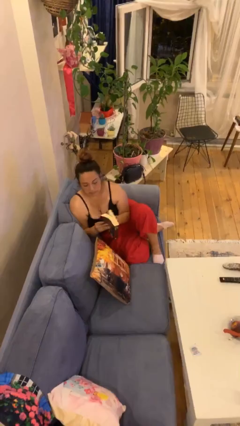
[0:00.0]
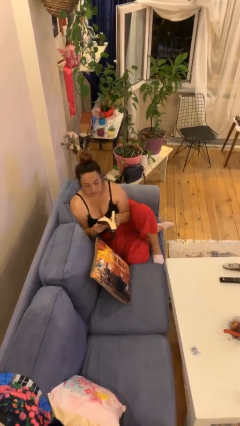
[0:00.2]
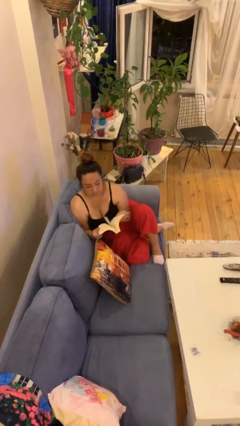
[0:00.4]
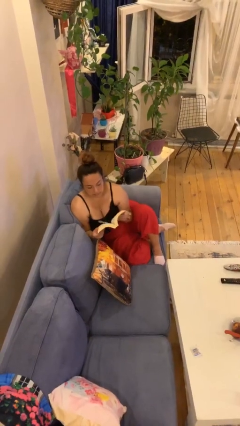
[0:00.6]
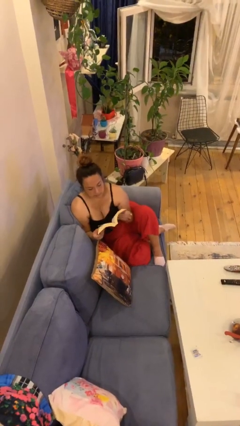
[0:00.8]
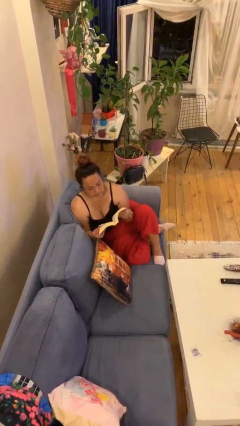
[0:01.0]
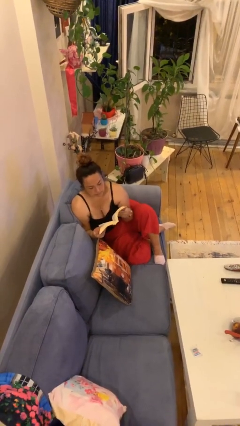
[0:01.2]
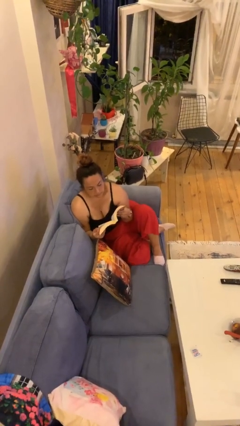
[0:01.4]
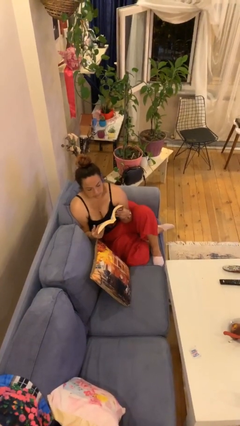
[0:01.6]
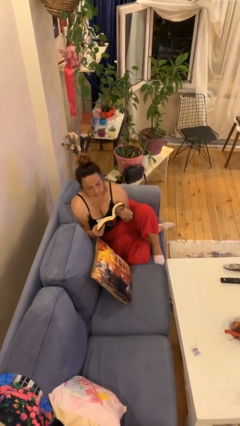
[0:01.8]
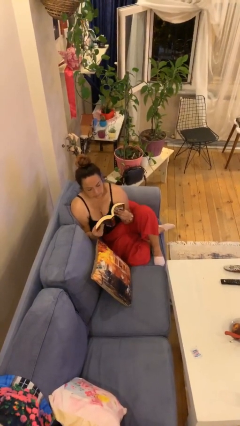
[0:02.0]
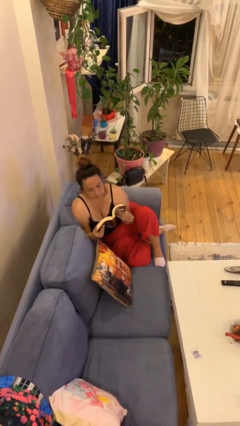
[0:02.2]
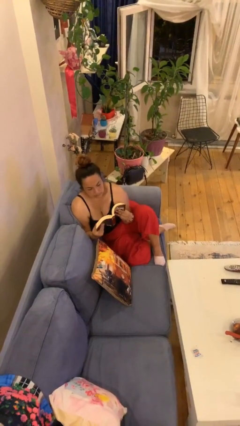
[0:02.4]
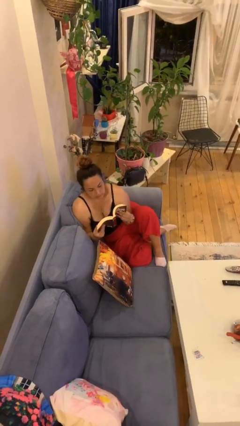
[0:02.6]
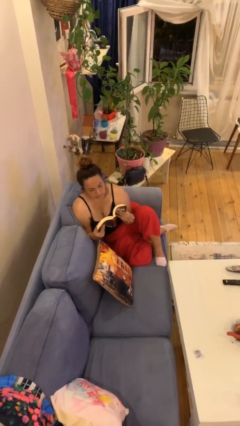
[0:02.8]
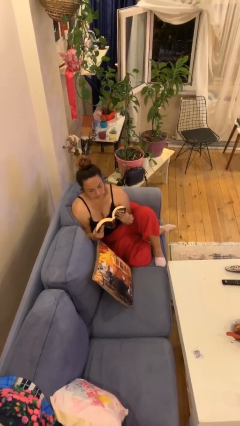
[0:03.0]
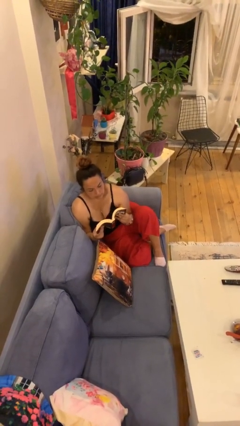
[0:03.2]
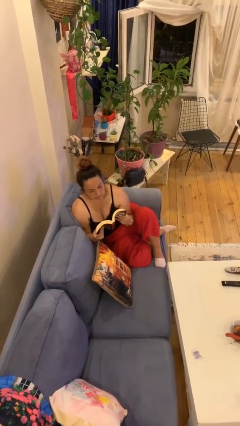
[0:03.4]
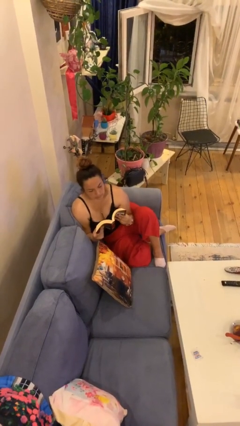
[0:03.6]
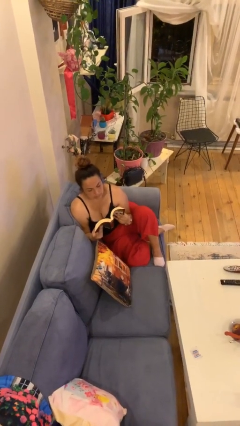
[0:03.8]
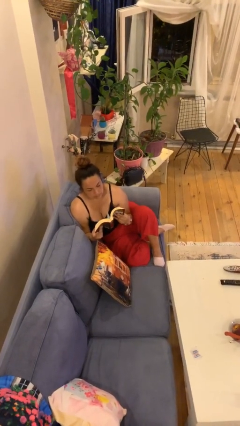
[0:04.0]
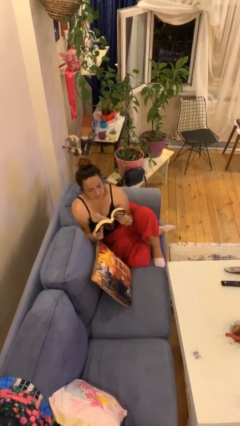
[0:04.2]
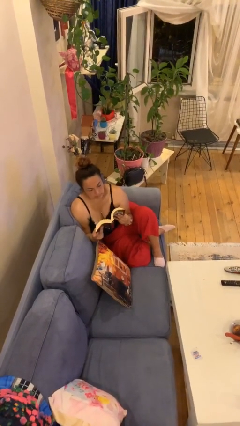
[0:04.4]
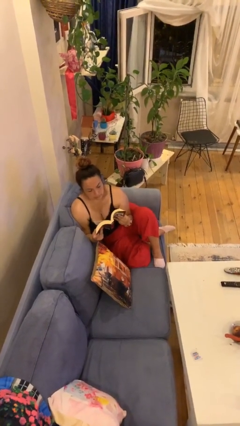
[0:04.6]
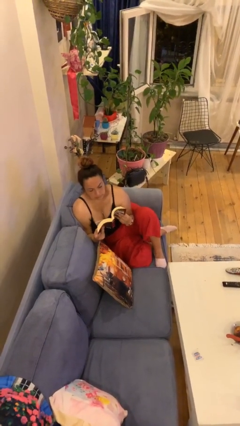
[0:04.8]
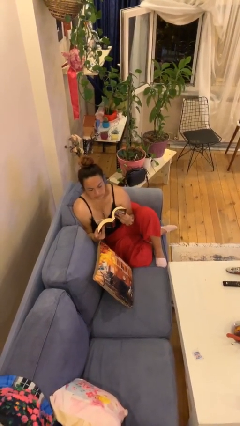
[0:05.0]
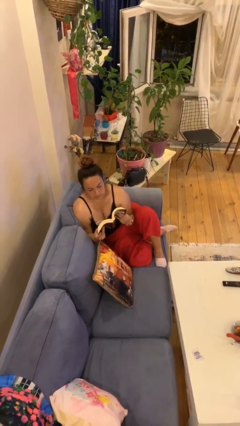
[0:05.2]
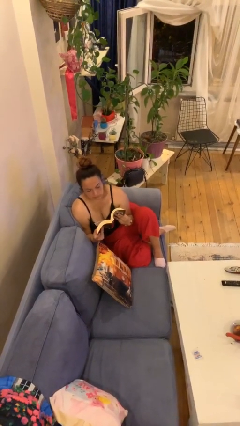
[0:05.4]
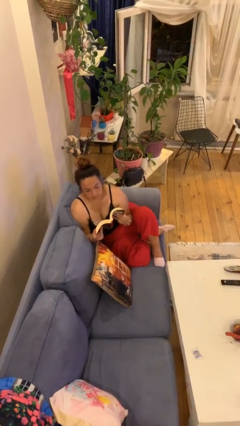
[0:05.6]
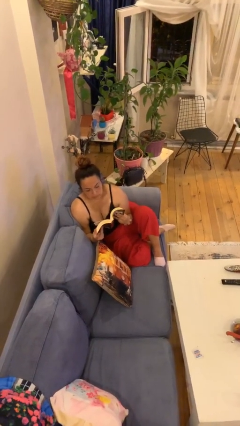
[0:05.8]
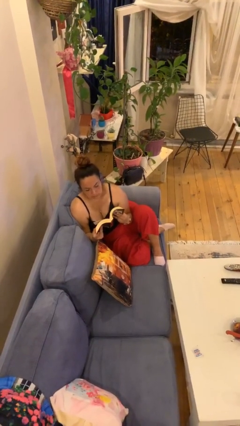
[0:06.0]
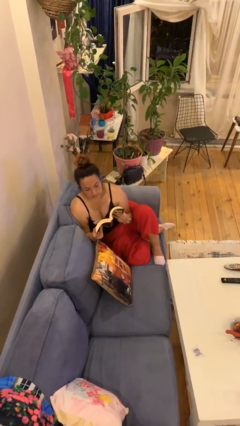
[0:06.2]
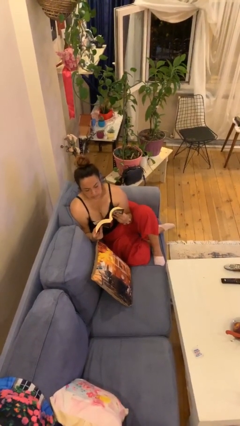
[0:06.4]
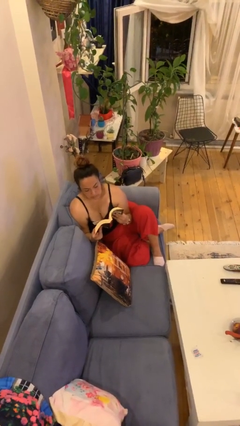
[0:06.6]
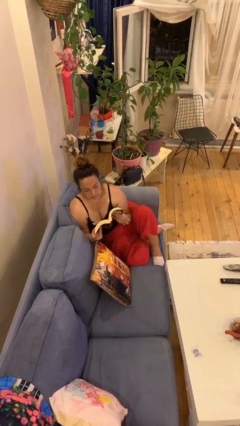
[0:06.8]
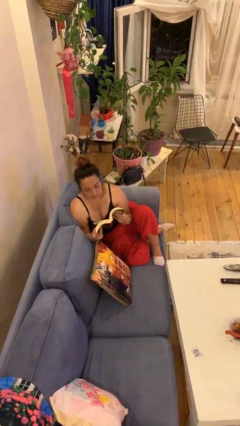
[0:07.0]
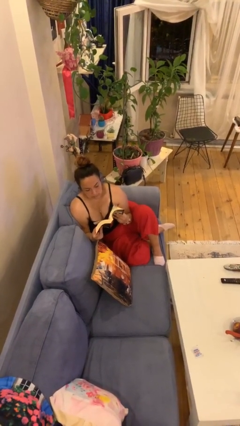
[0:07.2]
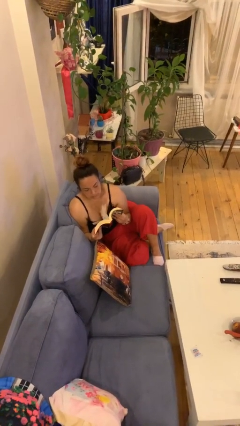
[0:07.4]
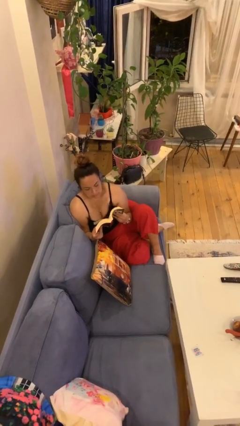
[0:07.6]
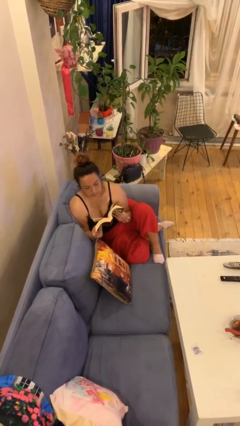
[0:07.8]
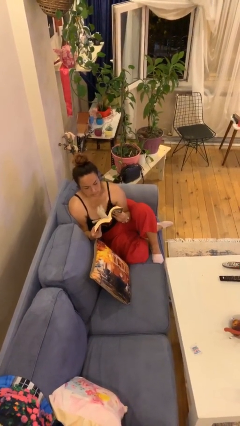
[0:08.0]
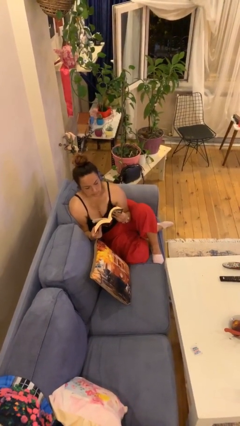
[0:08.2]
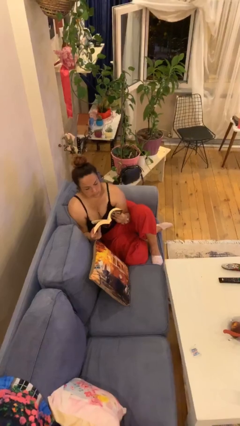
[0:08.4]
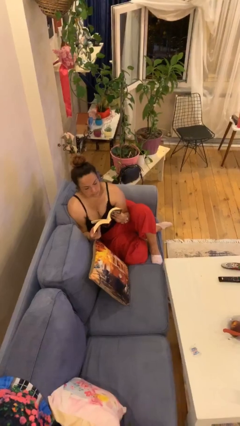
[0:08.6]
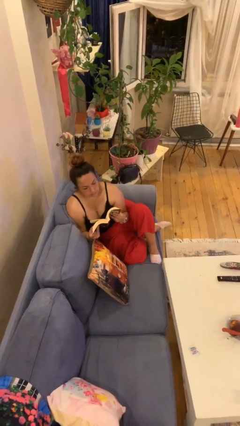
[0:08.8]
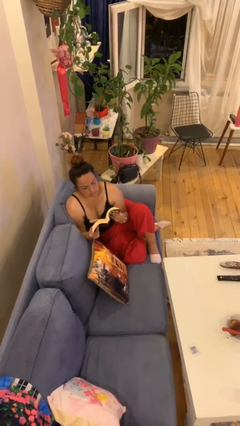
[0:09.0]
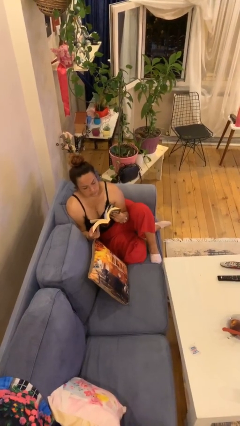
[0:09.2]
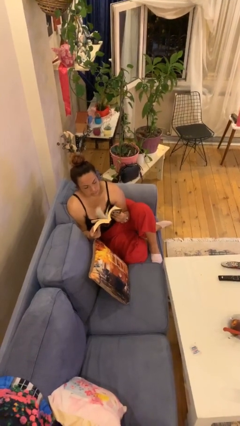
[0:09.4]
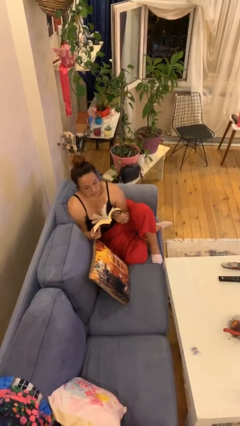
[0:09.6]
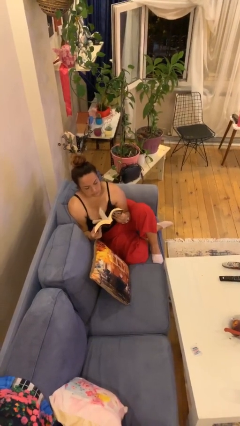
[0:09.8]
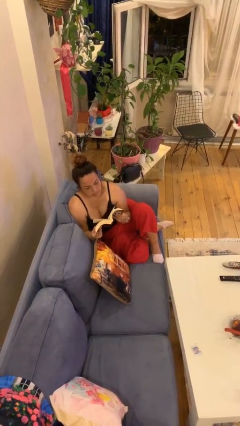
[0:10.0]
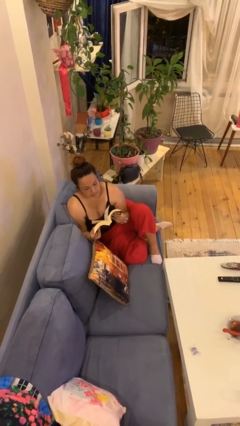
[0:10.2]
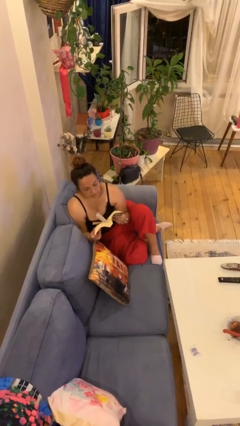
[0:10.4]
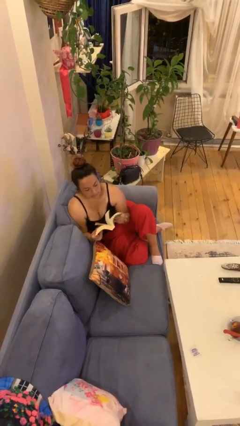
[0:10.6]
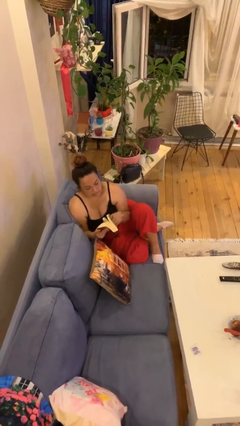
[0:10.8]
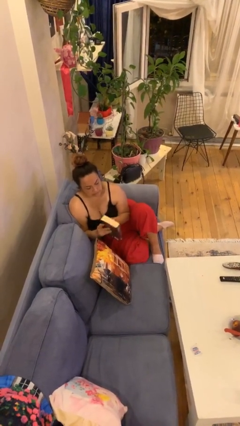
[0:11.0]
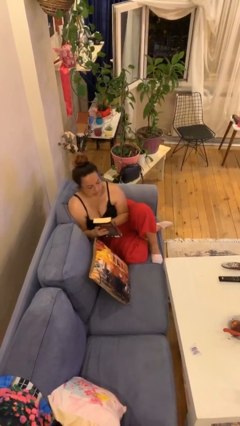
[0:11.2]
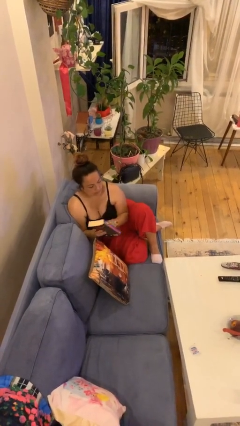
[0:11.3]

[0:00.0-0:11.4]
person reads document

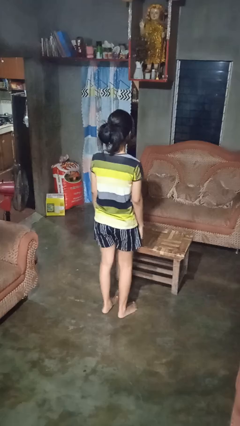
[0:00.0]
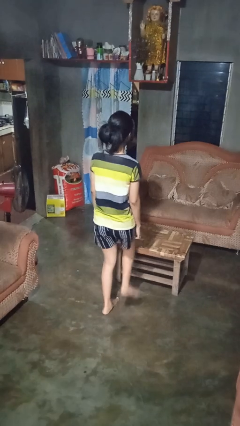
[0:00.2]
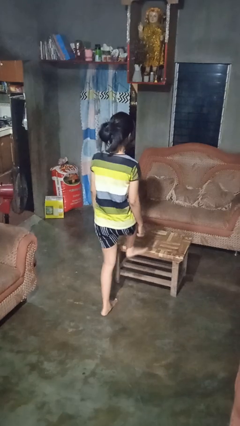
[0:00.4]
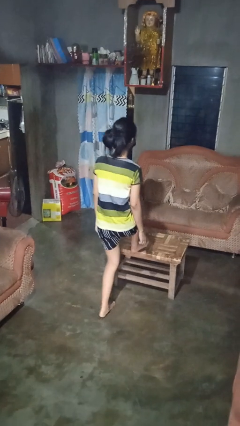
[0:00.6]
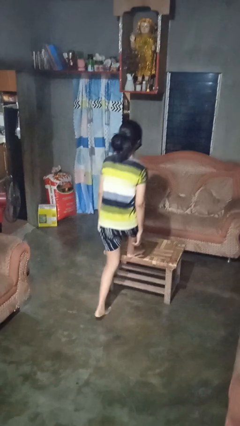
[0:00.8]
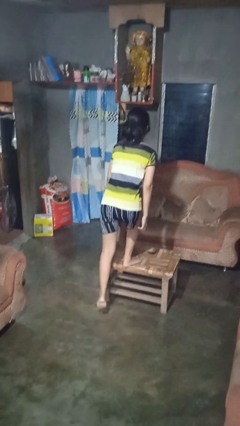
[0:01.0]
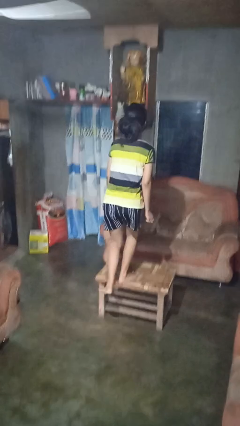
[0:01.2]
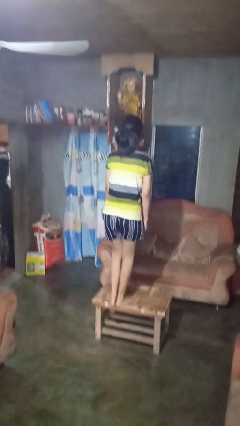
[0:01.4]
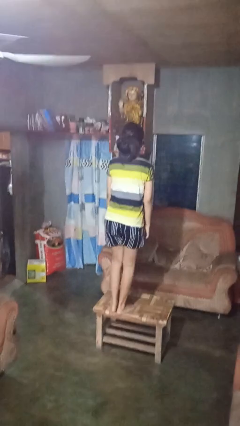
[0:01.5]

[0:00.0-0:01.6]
person climbs on table

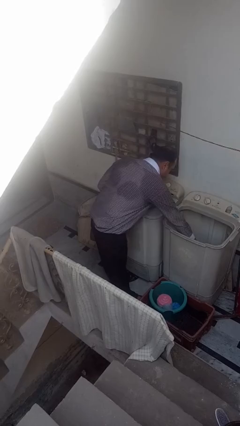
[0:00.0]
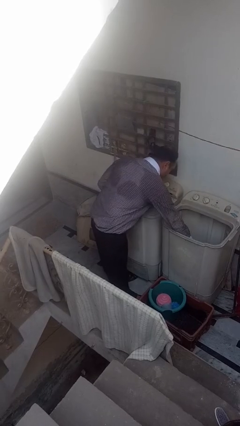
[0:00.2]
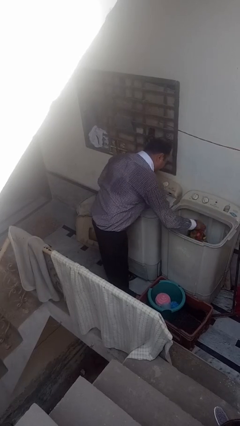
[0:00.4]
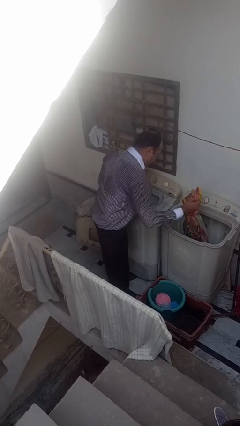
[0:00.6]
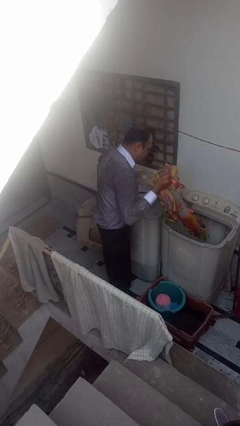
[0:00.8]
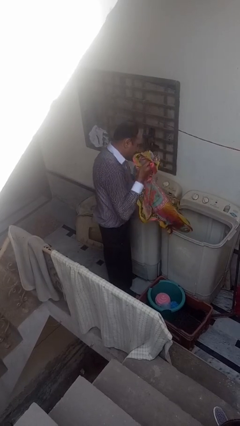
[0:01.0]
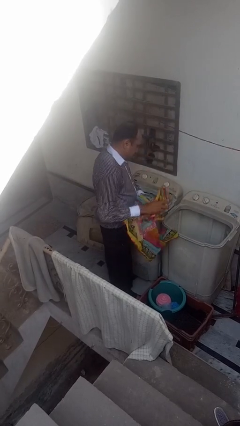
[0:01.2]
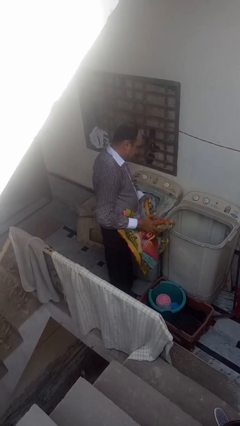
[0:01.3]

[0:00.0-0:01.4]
person unloads clotheswasher

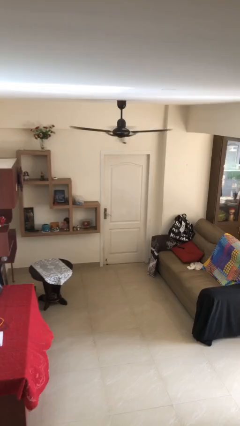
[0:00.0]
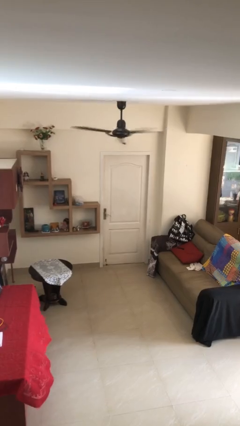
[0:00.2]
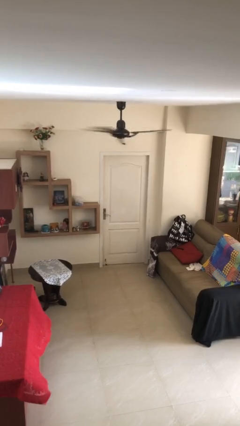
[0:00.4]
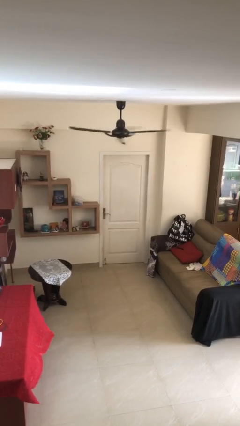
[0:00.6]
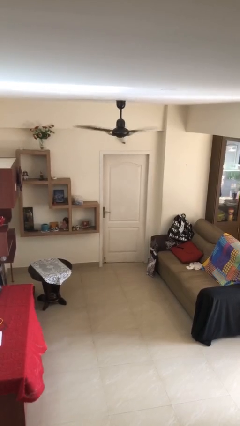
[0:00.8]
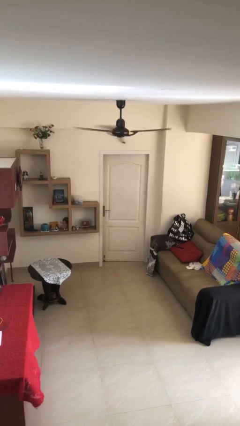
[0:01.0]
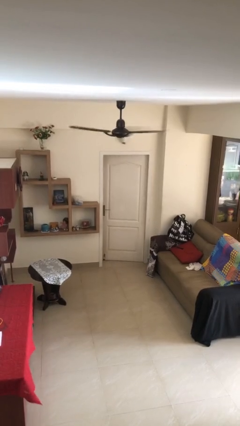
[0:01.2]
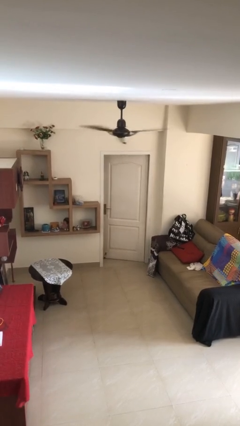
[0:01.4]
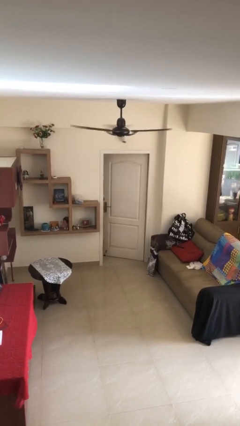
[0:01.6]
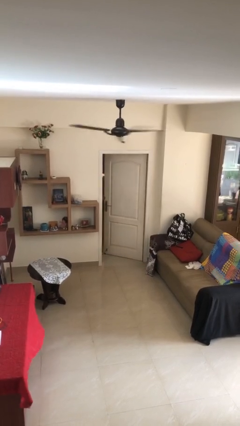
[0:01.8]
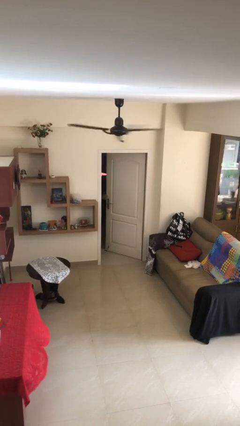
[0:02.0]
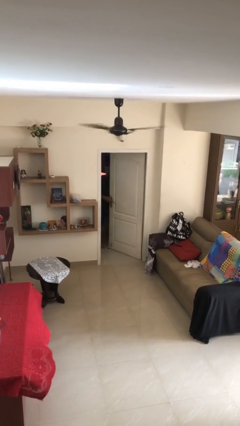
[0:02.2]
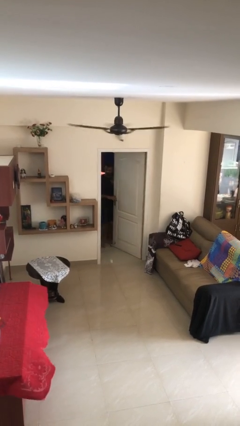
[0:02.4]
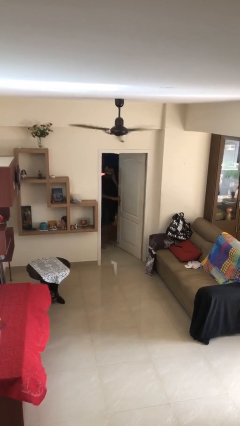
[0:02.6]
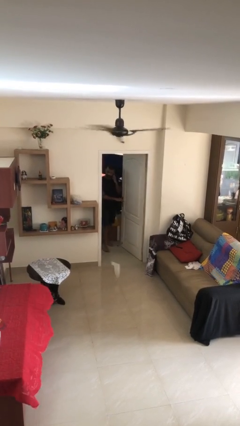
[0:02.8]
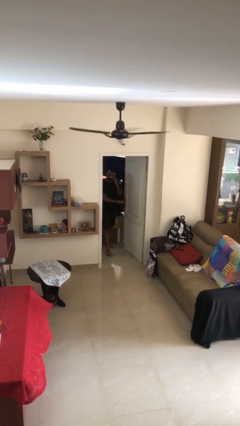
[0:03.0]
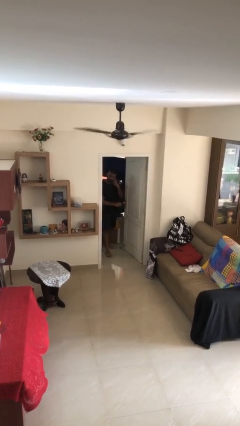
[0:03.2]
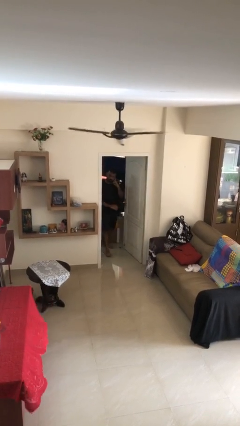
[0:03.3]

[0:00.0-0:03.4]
person opens facility door
